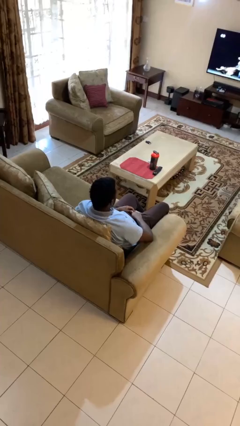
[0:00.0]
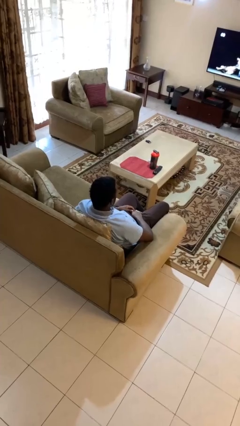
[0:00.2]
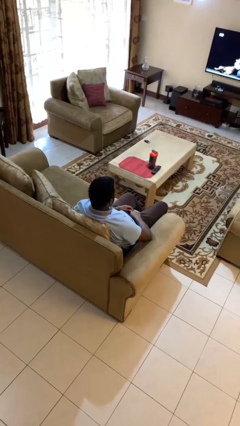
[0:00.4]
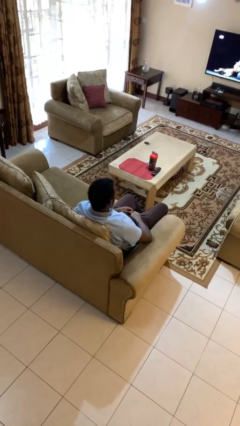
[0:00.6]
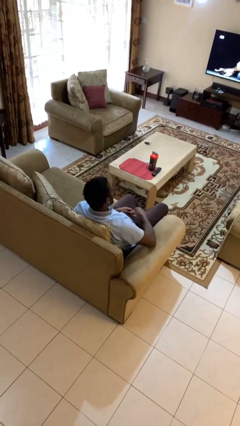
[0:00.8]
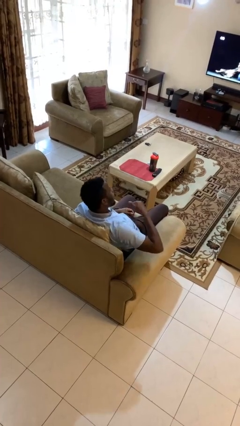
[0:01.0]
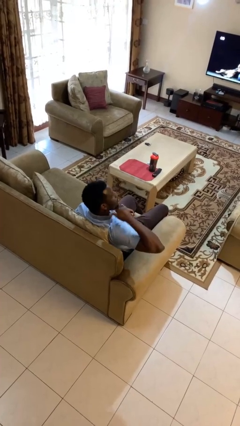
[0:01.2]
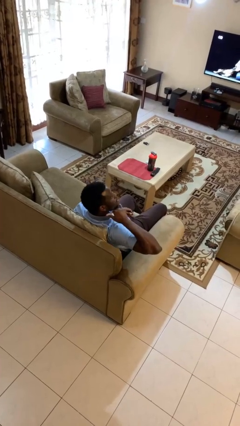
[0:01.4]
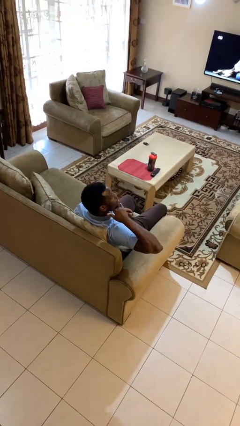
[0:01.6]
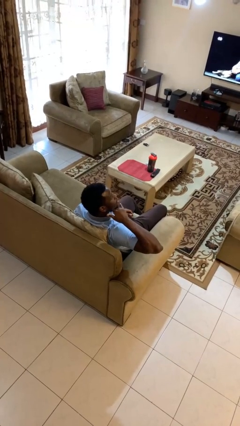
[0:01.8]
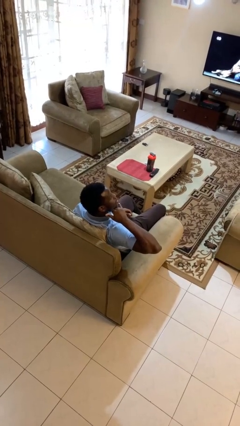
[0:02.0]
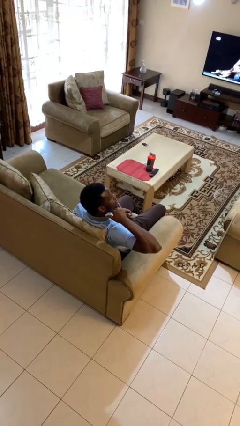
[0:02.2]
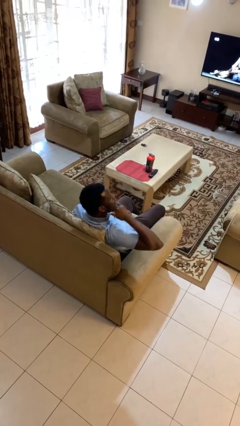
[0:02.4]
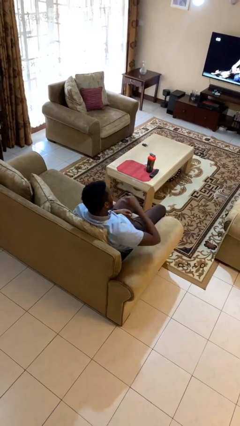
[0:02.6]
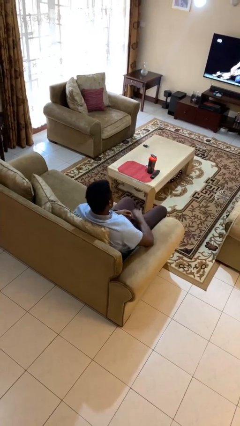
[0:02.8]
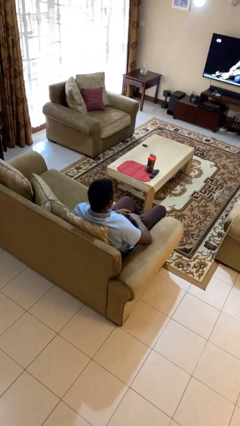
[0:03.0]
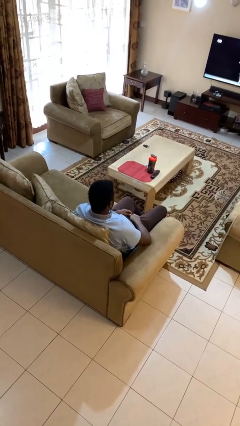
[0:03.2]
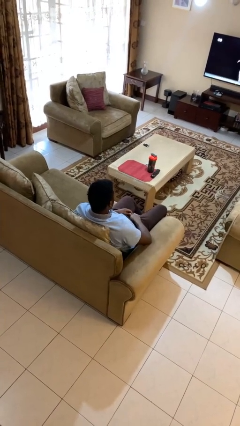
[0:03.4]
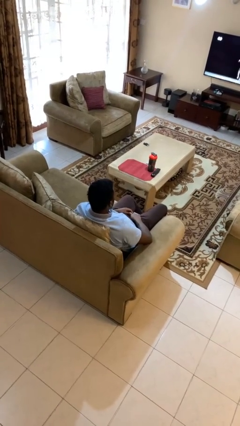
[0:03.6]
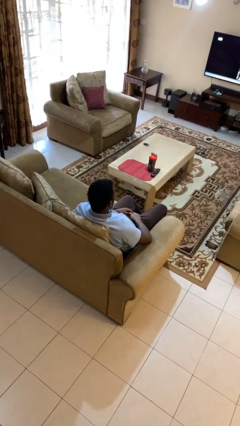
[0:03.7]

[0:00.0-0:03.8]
person gestures call me

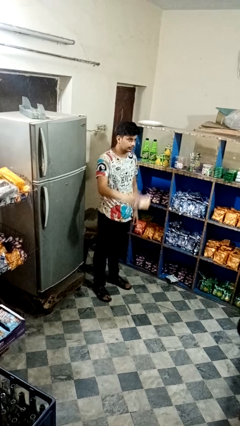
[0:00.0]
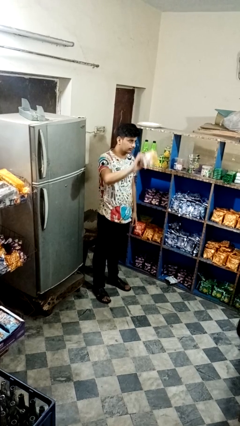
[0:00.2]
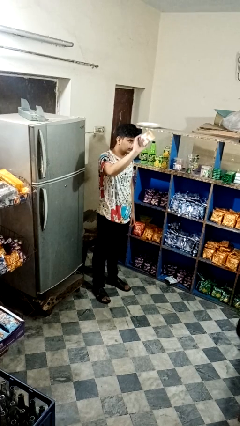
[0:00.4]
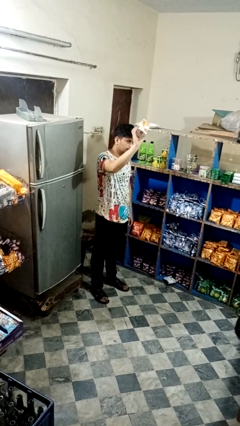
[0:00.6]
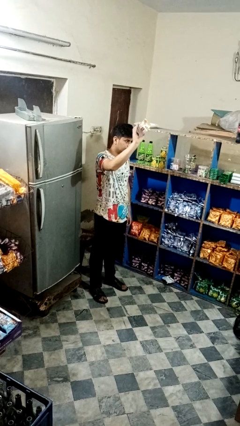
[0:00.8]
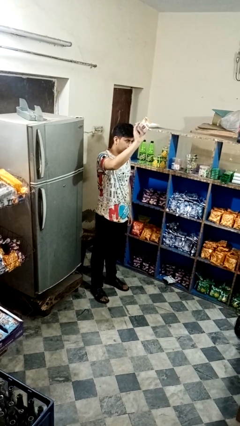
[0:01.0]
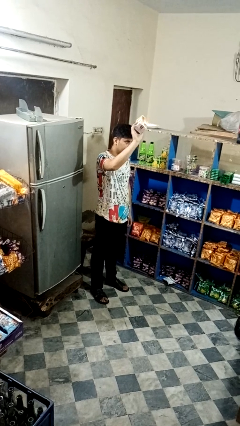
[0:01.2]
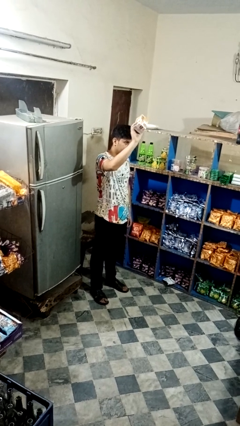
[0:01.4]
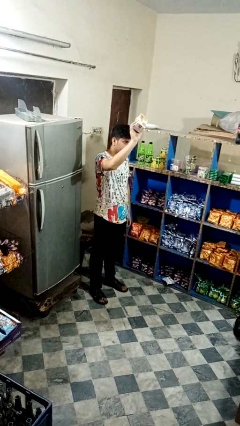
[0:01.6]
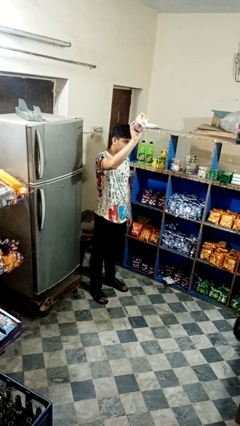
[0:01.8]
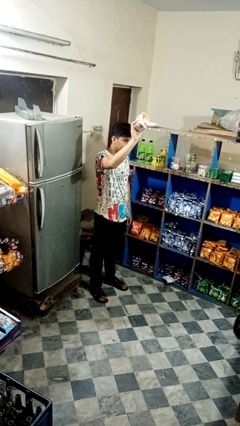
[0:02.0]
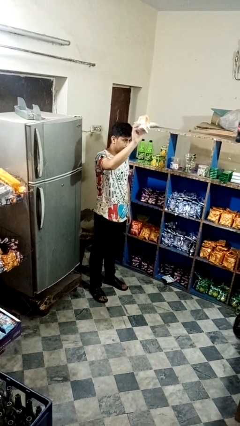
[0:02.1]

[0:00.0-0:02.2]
person holds object above head

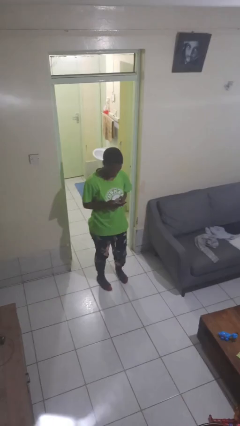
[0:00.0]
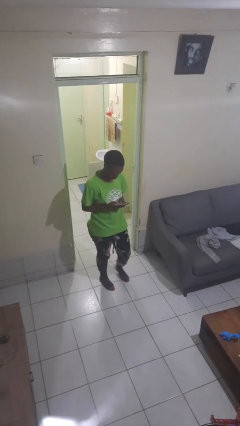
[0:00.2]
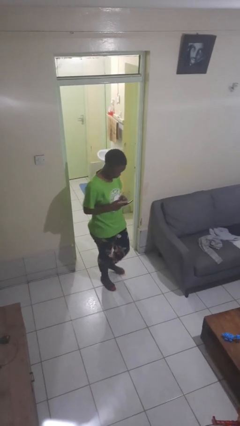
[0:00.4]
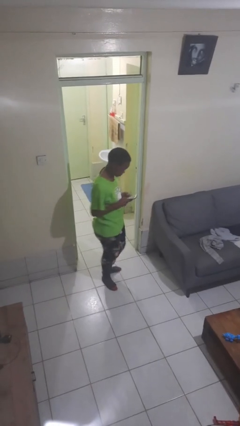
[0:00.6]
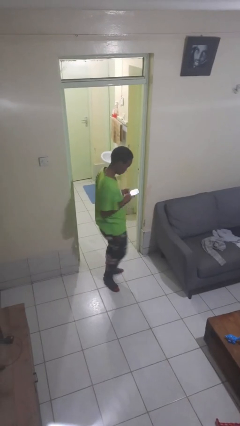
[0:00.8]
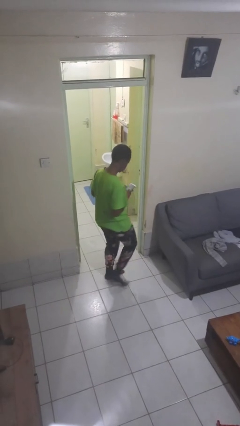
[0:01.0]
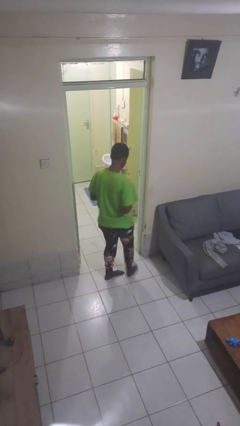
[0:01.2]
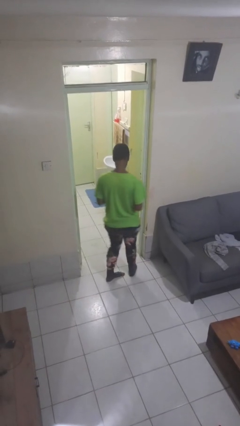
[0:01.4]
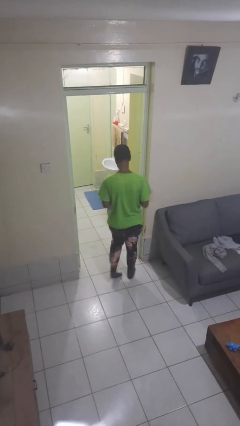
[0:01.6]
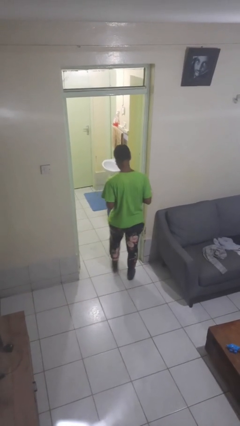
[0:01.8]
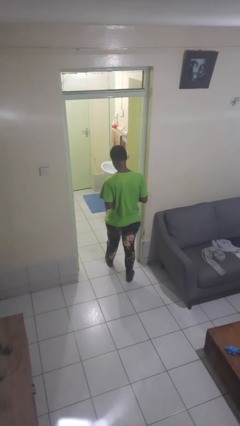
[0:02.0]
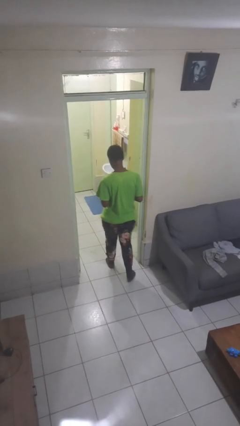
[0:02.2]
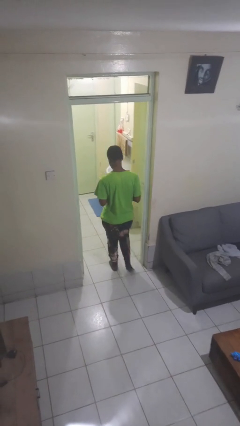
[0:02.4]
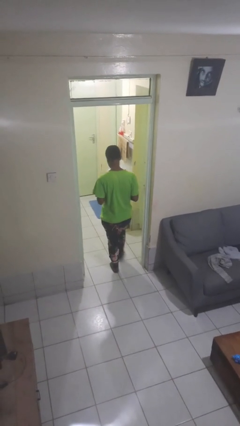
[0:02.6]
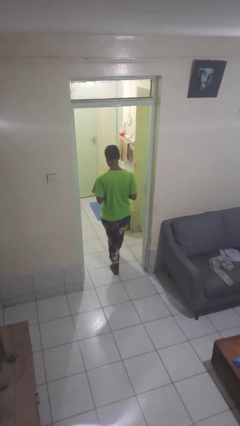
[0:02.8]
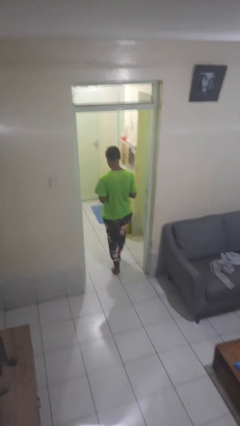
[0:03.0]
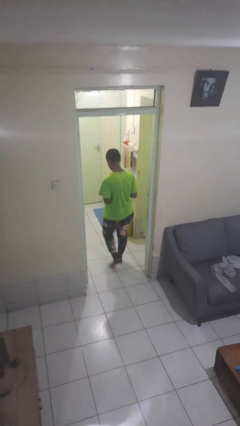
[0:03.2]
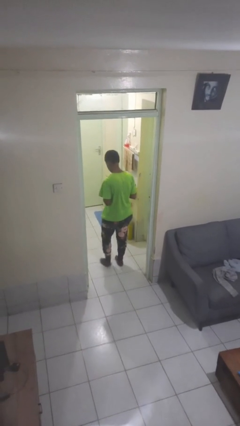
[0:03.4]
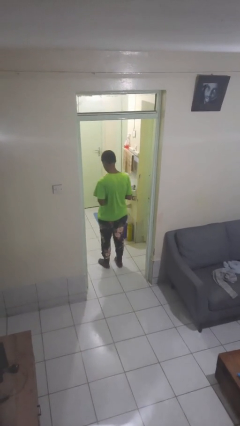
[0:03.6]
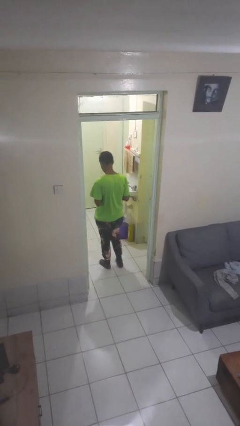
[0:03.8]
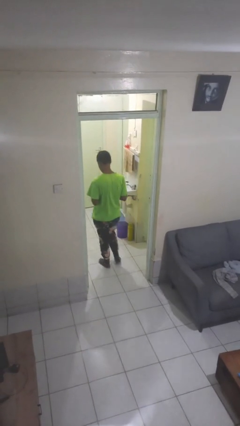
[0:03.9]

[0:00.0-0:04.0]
person exits scene through structure

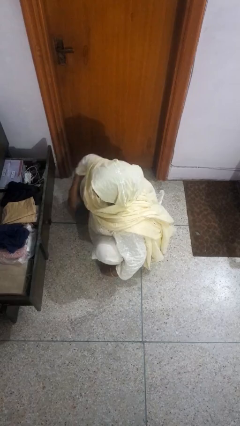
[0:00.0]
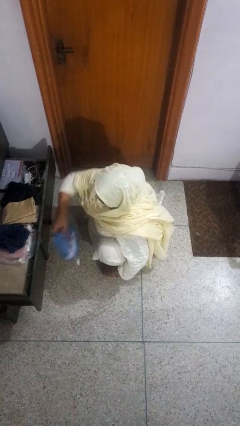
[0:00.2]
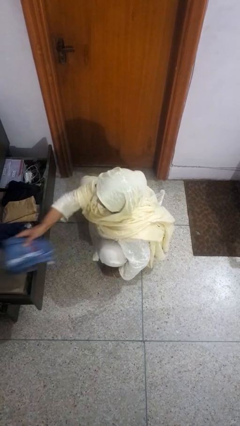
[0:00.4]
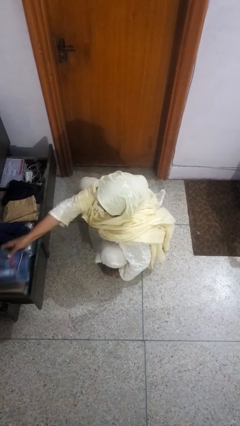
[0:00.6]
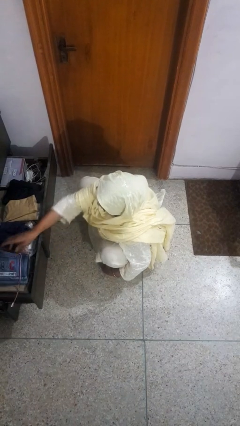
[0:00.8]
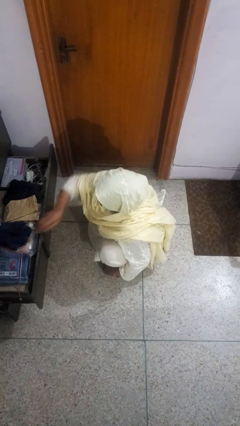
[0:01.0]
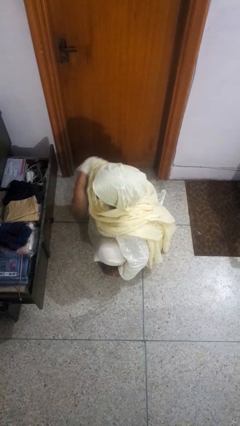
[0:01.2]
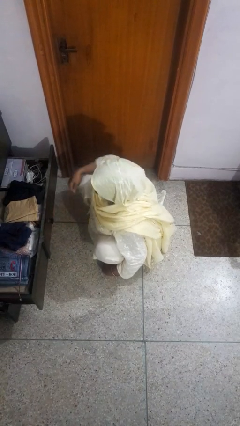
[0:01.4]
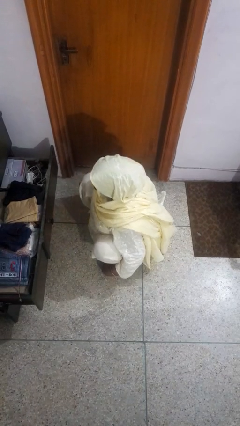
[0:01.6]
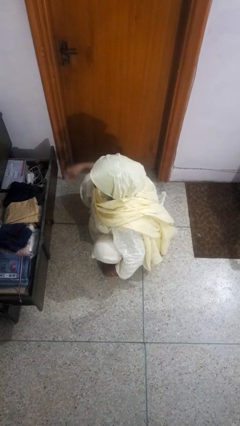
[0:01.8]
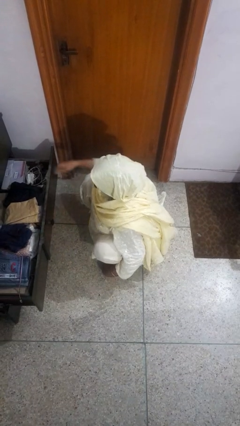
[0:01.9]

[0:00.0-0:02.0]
person puts clothes into dresser

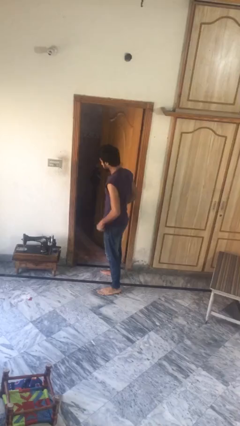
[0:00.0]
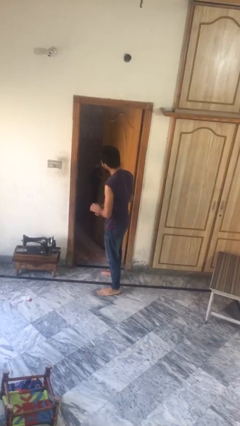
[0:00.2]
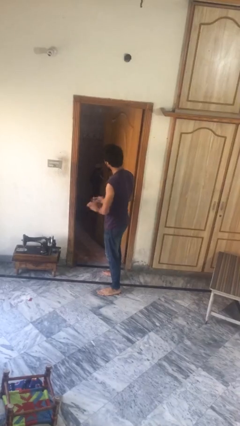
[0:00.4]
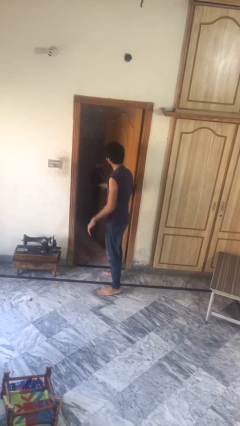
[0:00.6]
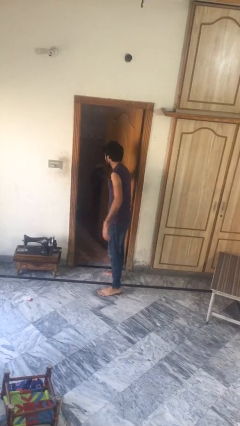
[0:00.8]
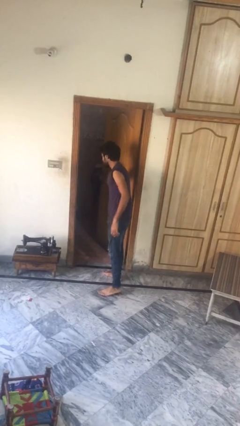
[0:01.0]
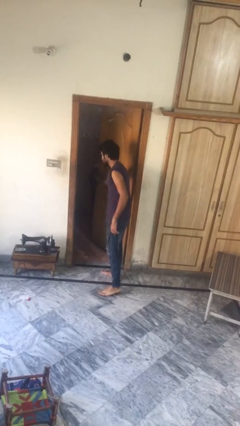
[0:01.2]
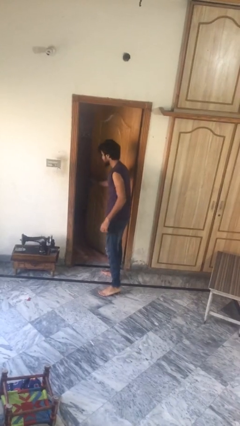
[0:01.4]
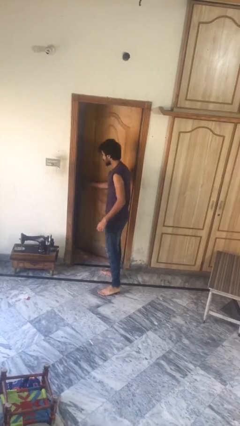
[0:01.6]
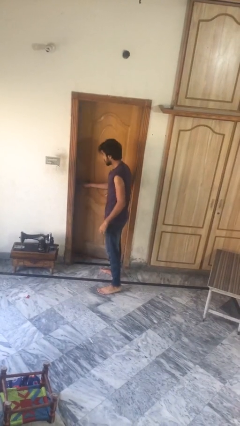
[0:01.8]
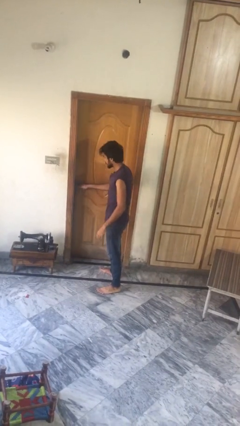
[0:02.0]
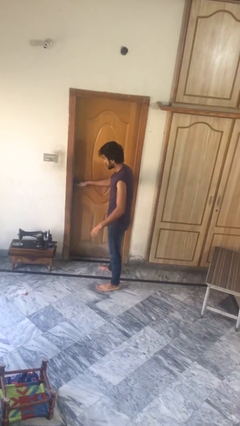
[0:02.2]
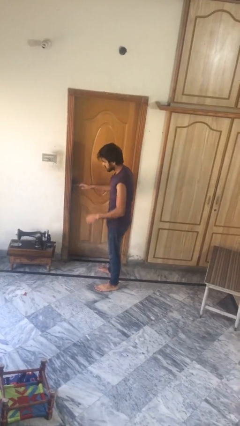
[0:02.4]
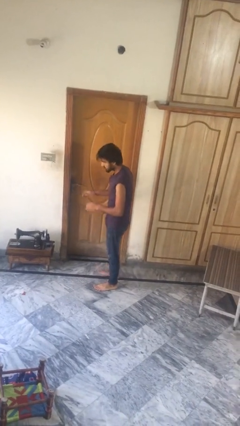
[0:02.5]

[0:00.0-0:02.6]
person closes facility door

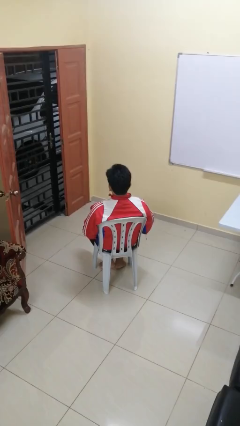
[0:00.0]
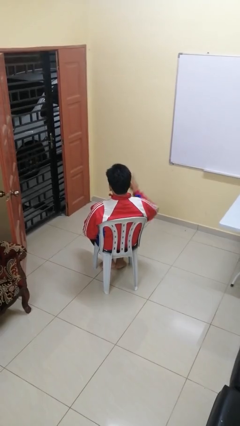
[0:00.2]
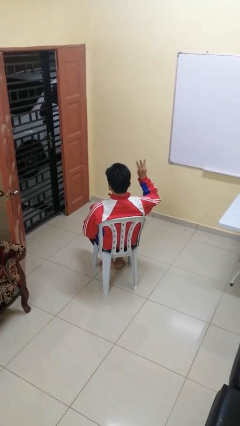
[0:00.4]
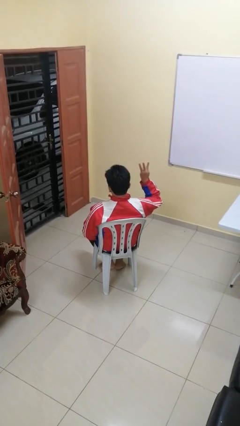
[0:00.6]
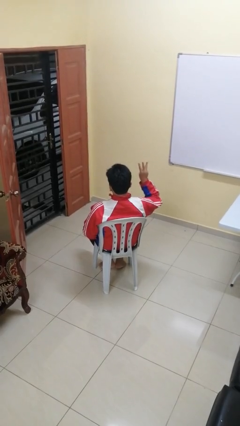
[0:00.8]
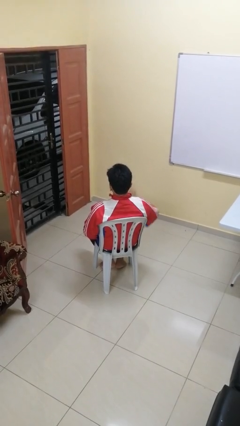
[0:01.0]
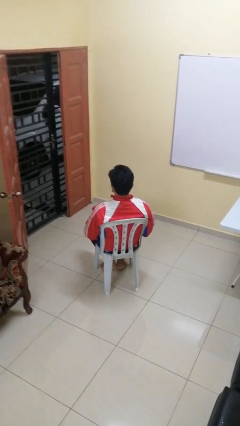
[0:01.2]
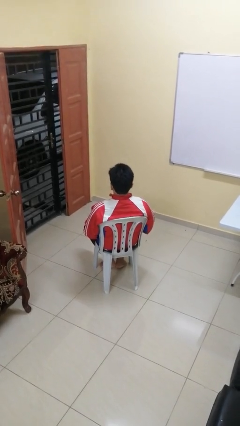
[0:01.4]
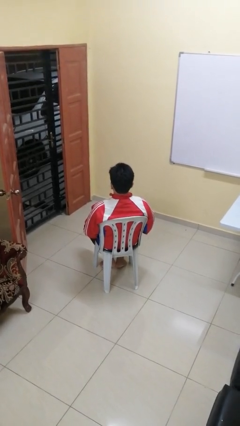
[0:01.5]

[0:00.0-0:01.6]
person gestures number three

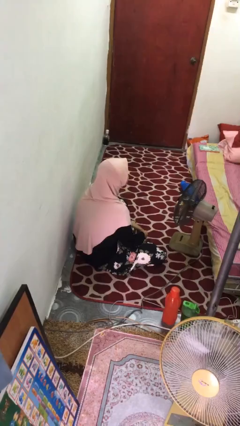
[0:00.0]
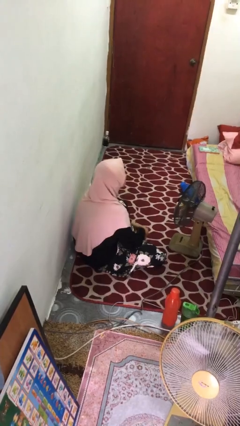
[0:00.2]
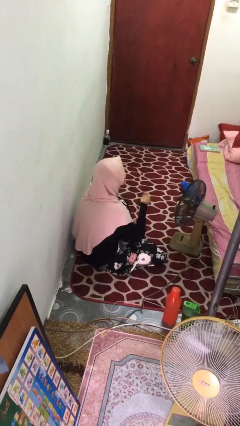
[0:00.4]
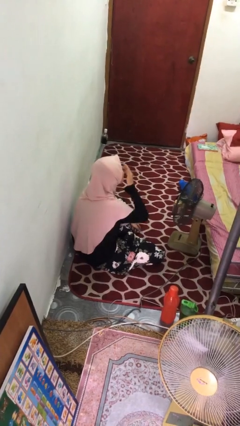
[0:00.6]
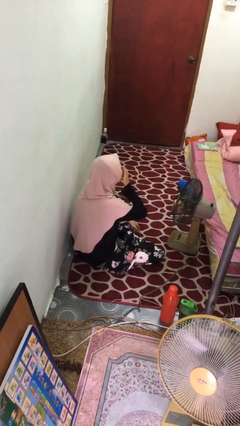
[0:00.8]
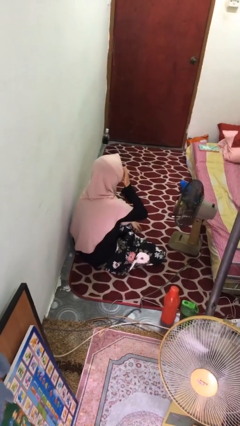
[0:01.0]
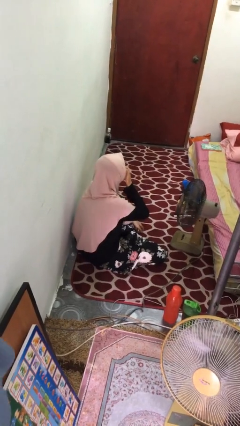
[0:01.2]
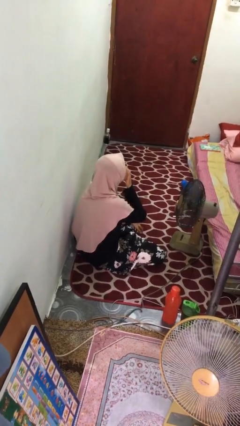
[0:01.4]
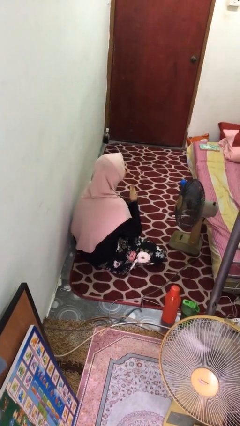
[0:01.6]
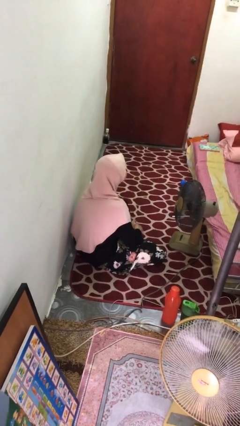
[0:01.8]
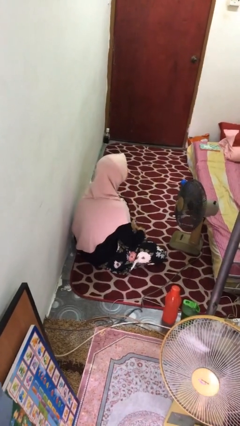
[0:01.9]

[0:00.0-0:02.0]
person yawns
